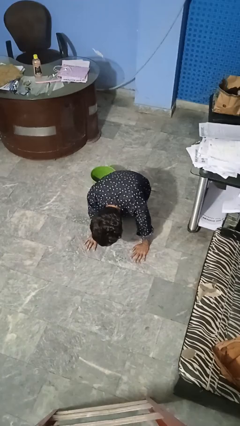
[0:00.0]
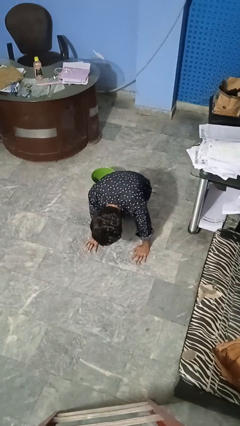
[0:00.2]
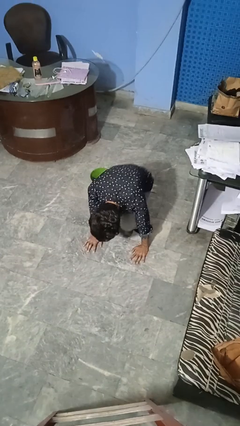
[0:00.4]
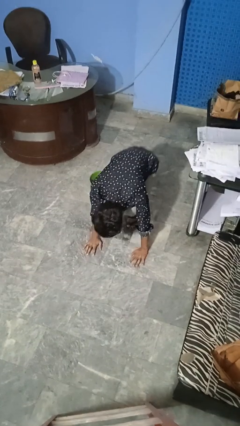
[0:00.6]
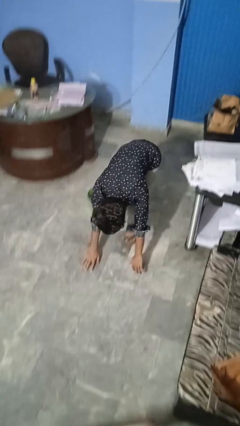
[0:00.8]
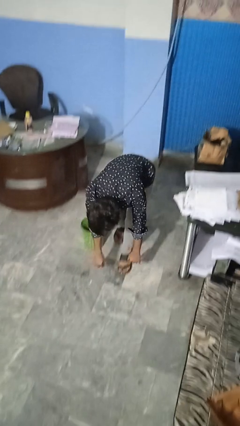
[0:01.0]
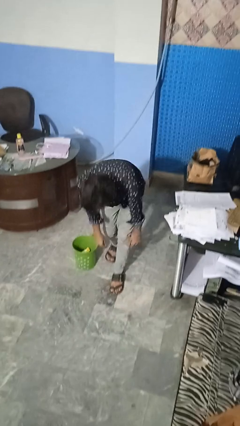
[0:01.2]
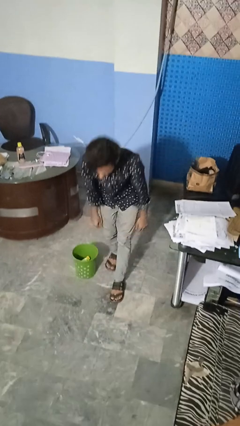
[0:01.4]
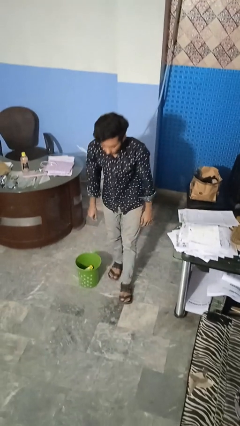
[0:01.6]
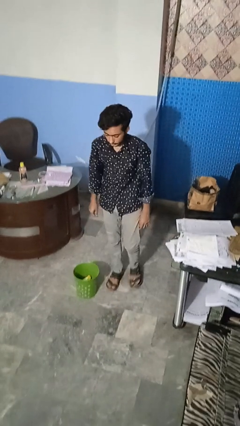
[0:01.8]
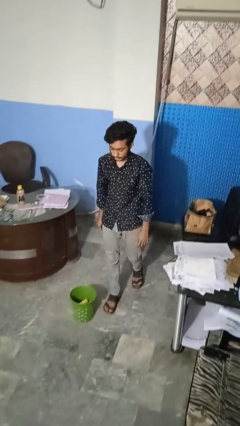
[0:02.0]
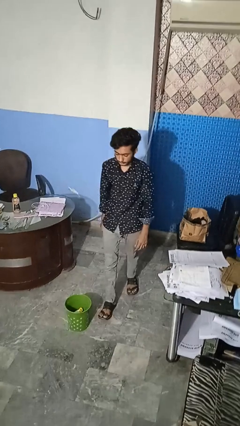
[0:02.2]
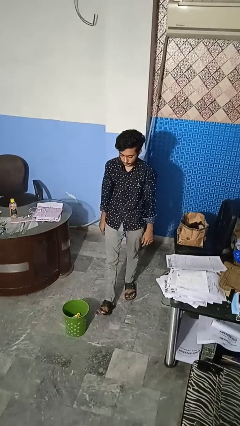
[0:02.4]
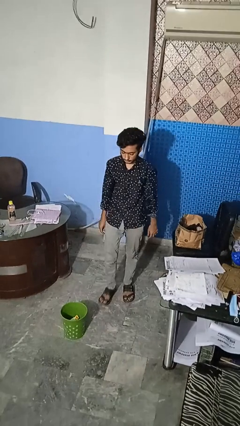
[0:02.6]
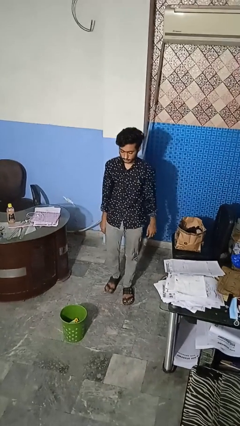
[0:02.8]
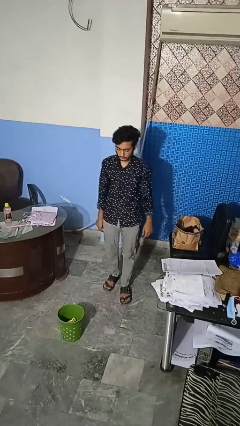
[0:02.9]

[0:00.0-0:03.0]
person stands up from floor

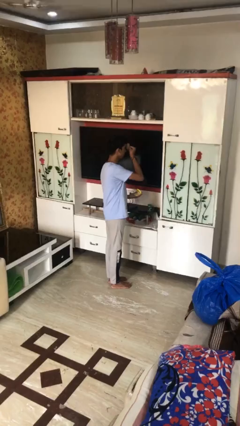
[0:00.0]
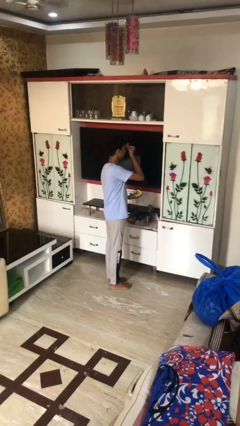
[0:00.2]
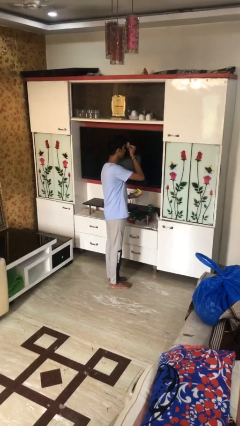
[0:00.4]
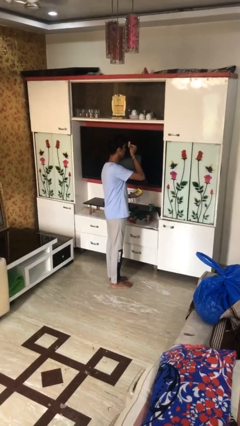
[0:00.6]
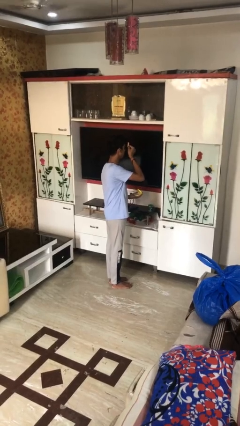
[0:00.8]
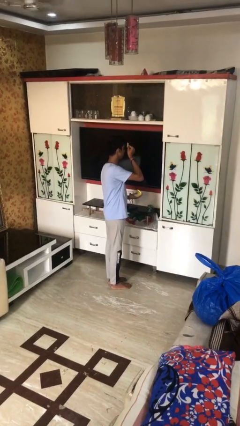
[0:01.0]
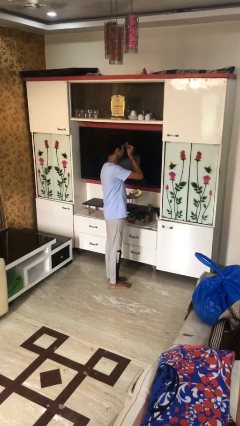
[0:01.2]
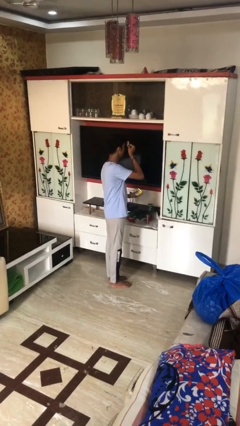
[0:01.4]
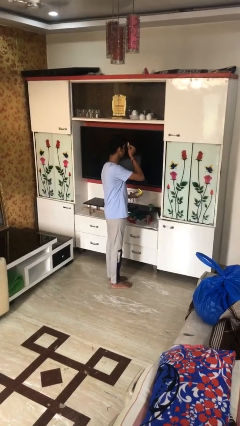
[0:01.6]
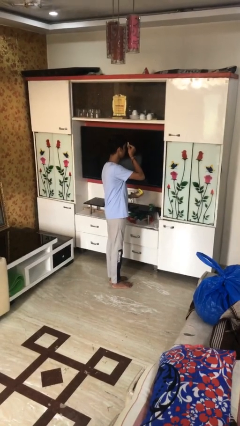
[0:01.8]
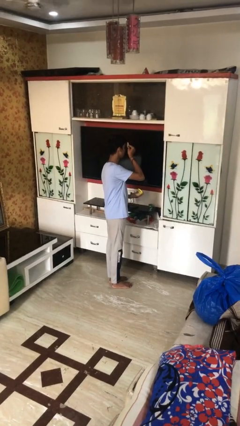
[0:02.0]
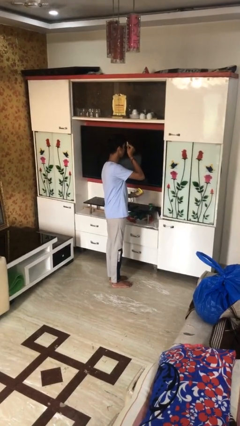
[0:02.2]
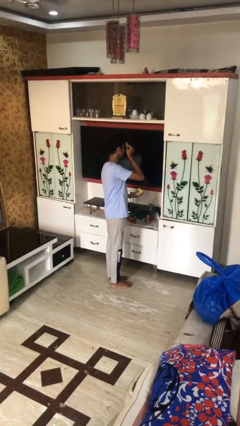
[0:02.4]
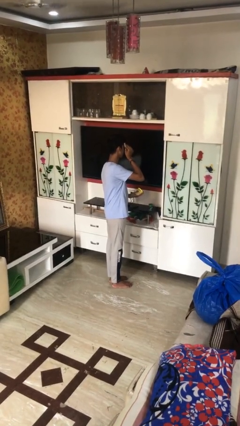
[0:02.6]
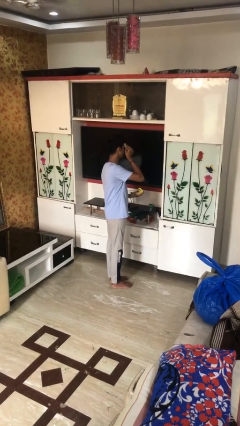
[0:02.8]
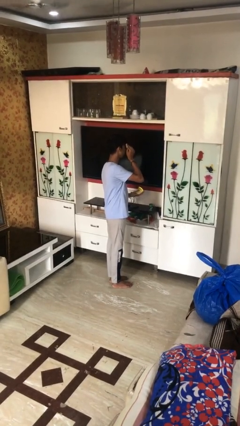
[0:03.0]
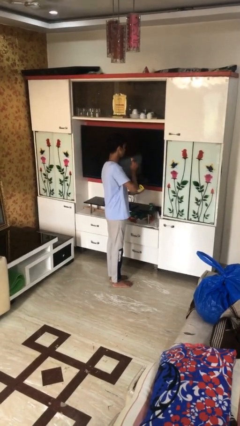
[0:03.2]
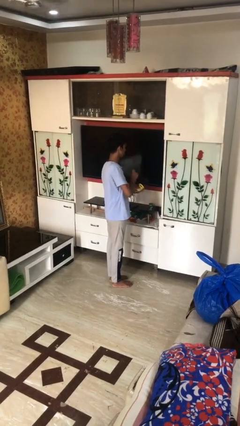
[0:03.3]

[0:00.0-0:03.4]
person applies foundation makeup

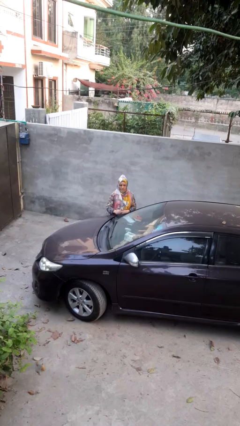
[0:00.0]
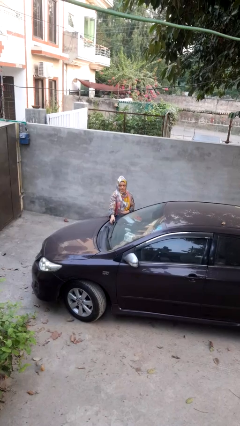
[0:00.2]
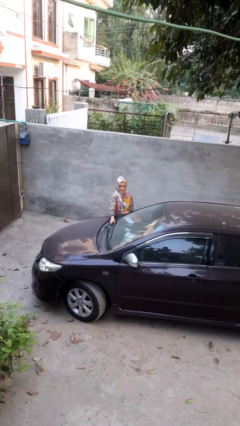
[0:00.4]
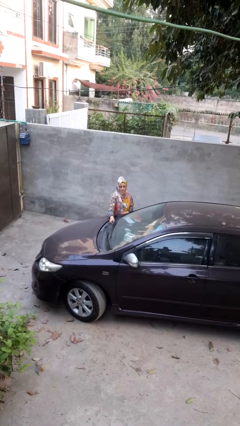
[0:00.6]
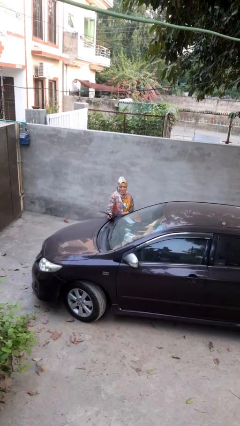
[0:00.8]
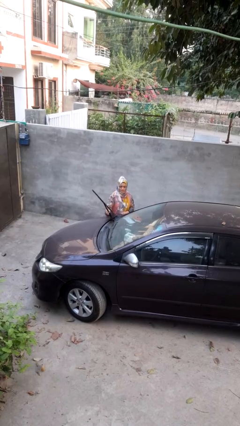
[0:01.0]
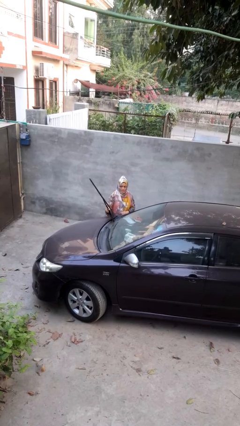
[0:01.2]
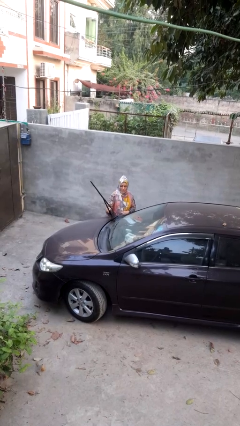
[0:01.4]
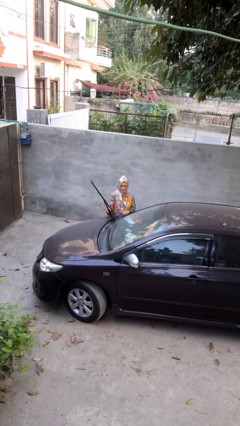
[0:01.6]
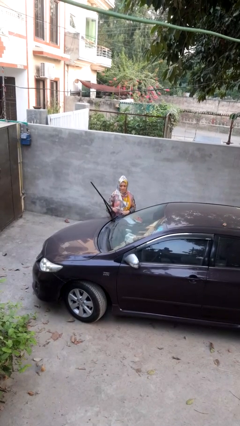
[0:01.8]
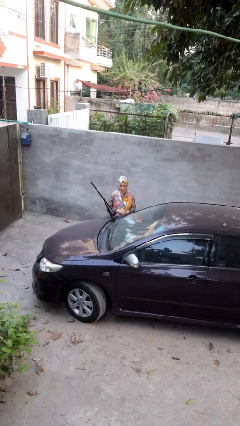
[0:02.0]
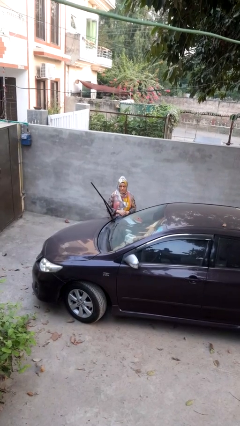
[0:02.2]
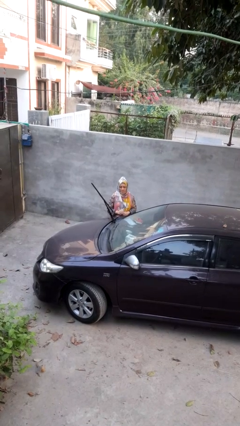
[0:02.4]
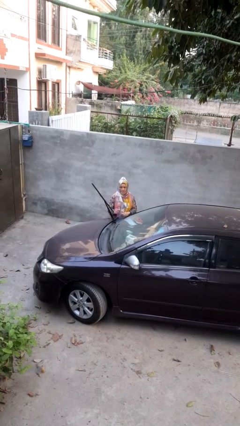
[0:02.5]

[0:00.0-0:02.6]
person flips up car wipers

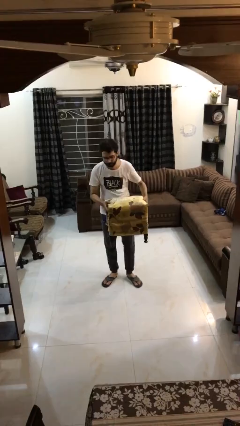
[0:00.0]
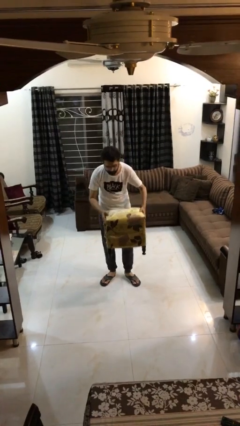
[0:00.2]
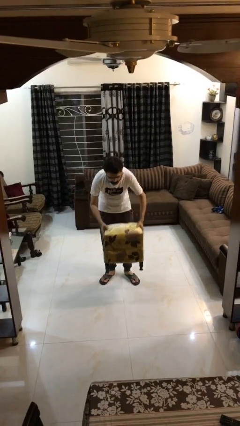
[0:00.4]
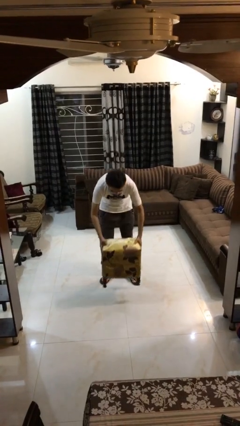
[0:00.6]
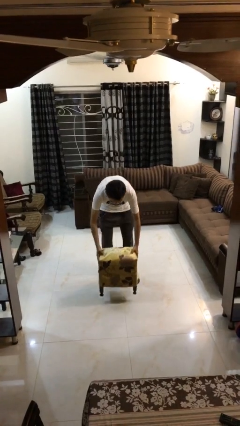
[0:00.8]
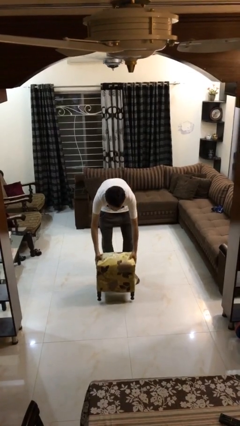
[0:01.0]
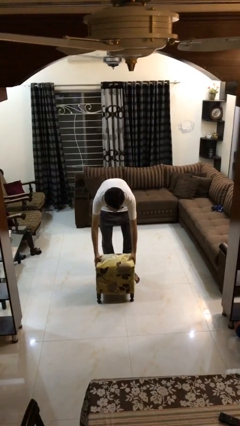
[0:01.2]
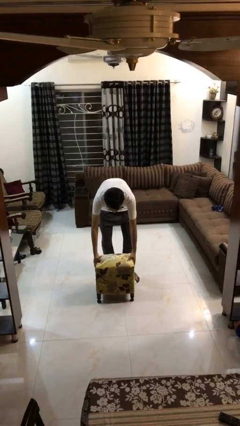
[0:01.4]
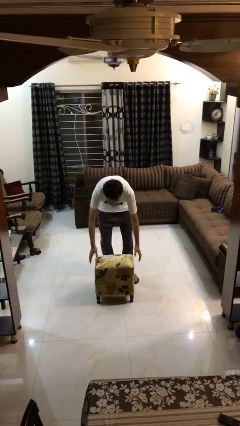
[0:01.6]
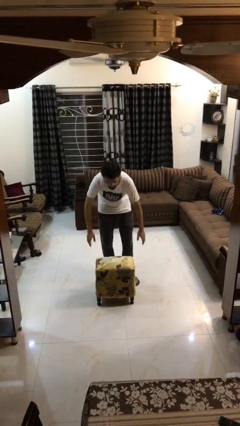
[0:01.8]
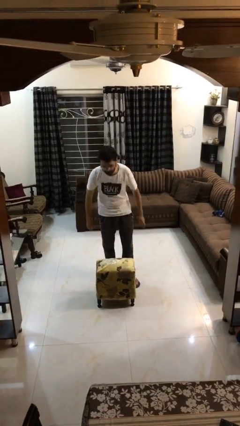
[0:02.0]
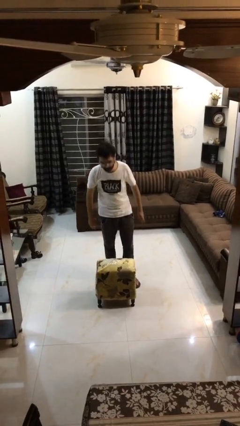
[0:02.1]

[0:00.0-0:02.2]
person puts down object on floor

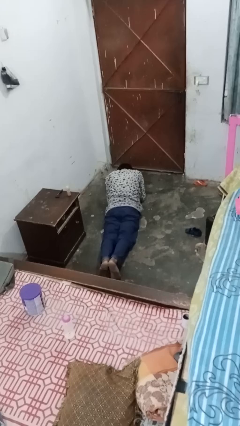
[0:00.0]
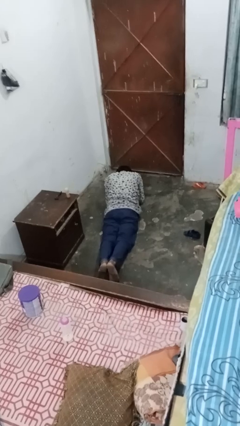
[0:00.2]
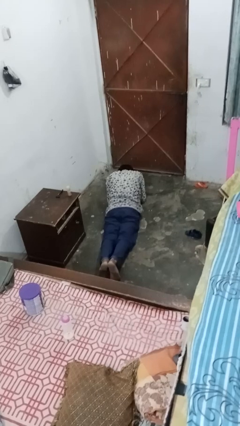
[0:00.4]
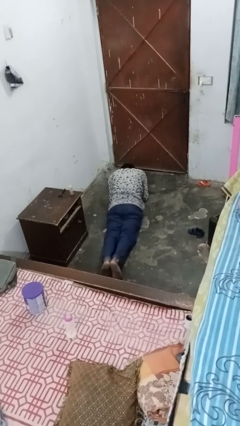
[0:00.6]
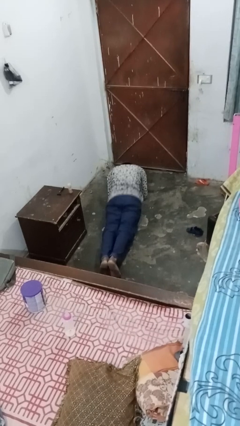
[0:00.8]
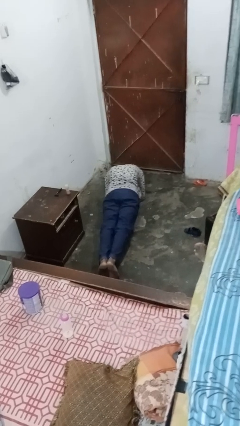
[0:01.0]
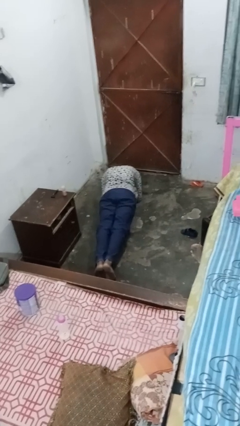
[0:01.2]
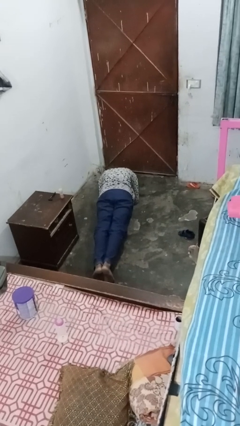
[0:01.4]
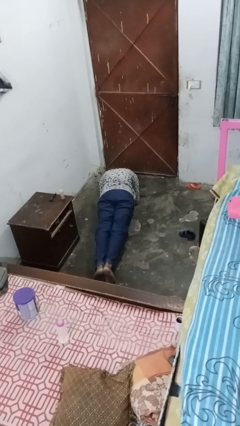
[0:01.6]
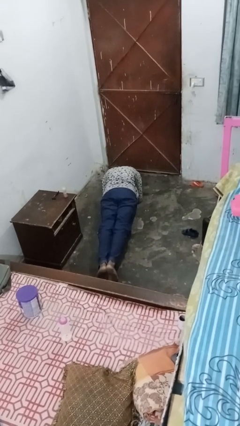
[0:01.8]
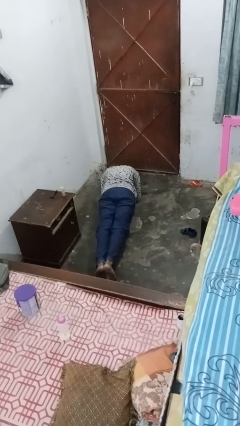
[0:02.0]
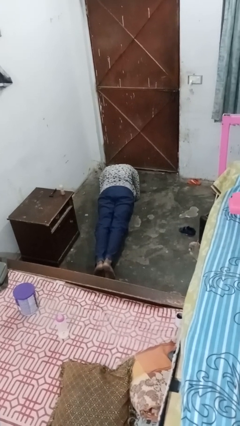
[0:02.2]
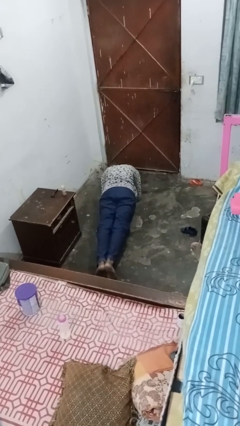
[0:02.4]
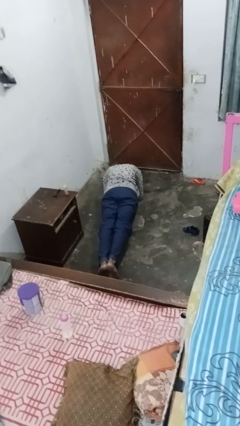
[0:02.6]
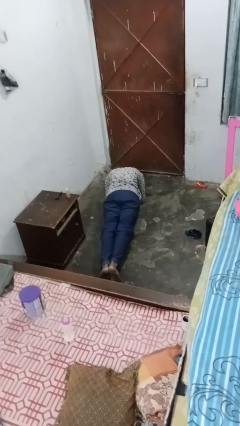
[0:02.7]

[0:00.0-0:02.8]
person exercises with plank

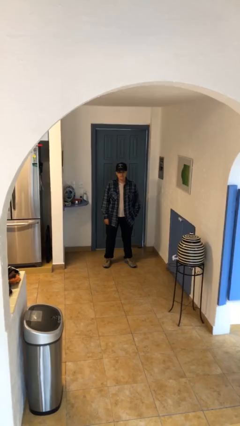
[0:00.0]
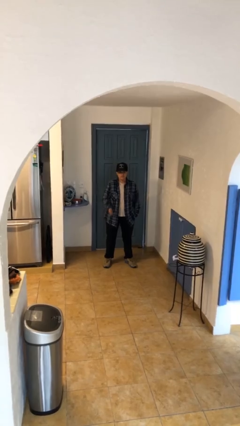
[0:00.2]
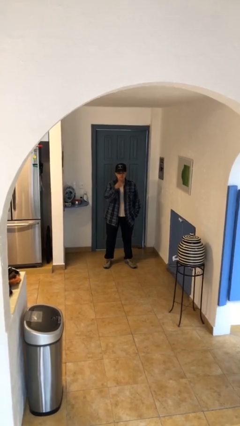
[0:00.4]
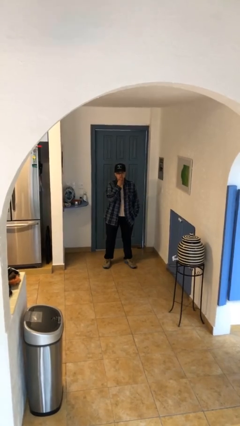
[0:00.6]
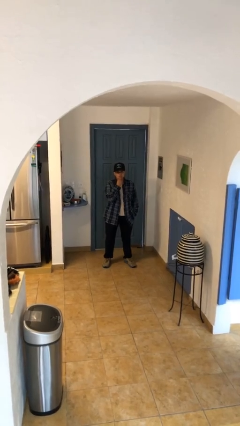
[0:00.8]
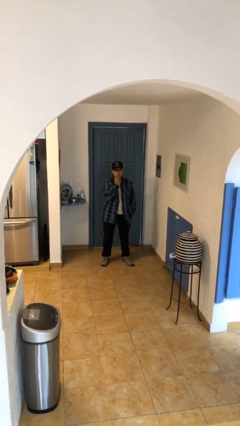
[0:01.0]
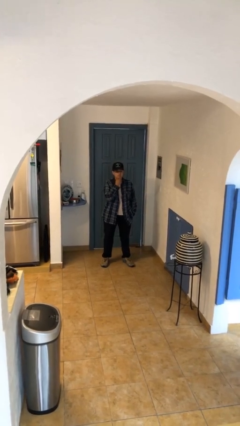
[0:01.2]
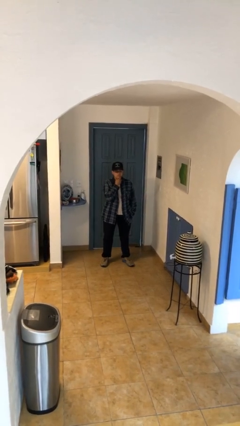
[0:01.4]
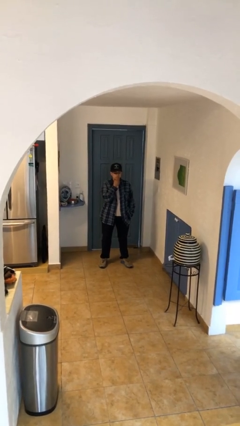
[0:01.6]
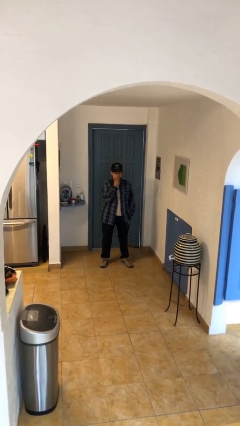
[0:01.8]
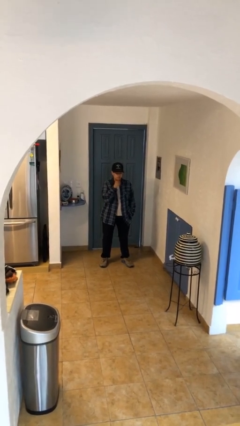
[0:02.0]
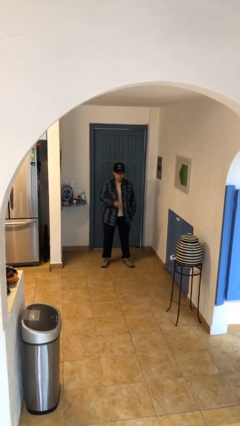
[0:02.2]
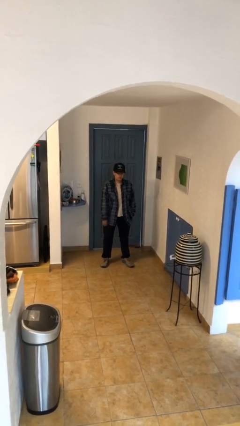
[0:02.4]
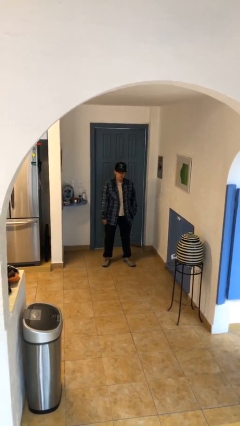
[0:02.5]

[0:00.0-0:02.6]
person strokes chin

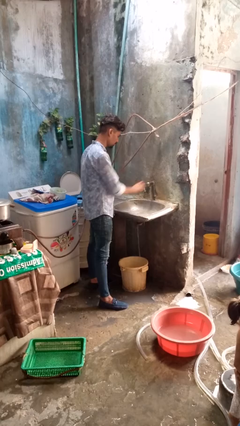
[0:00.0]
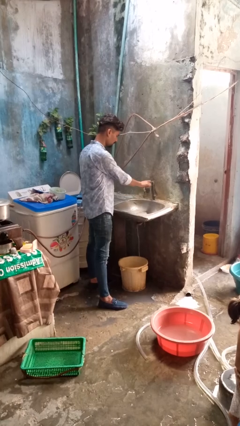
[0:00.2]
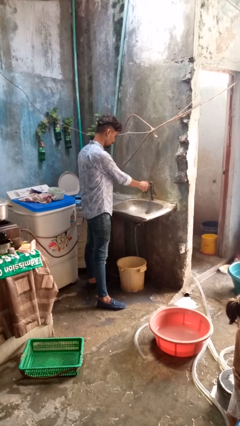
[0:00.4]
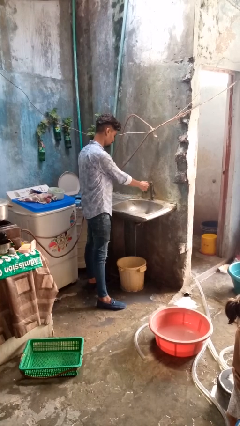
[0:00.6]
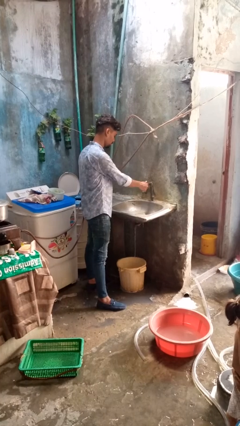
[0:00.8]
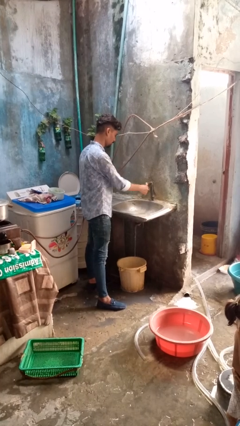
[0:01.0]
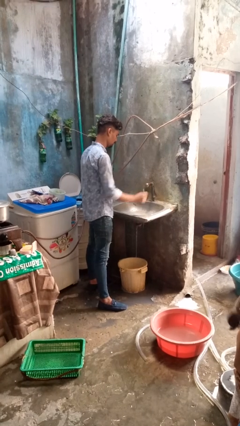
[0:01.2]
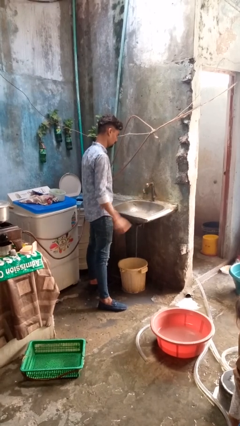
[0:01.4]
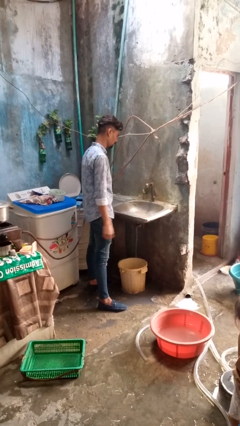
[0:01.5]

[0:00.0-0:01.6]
person turns off faucet
